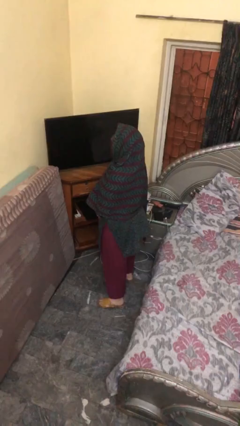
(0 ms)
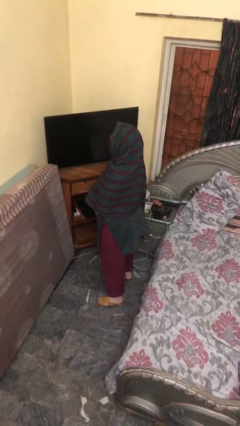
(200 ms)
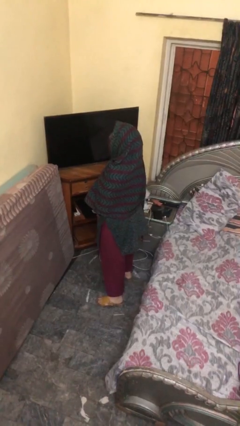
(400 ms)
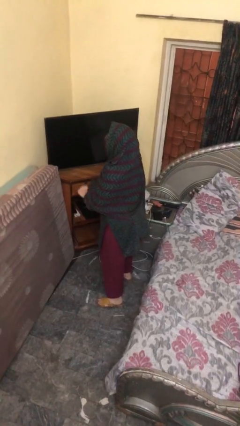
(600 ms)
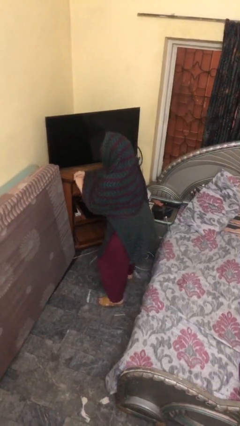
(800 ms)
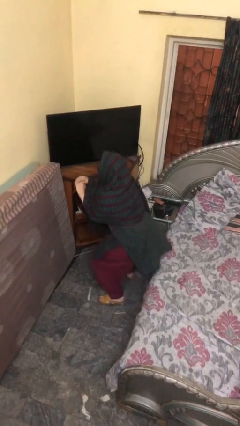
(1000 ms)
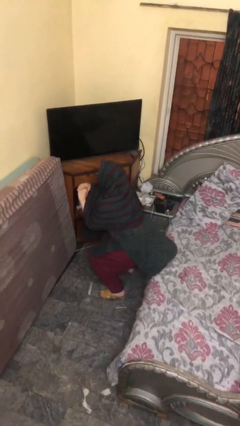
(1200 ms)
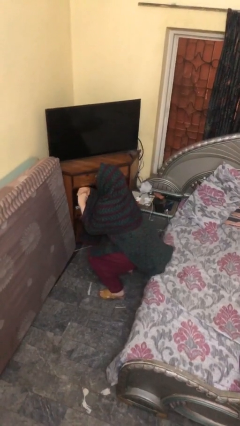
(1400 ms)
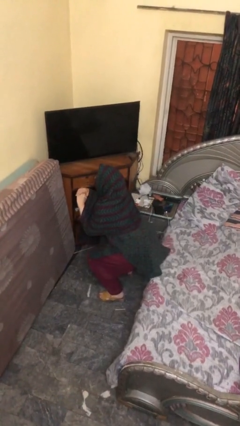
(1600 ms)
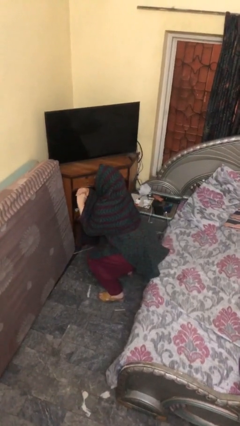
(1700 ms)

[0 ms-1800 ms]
person squats

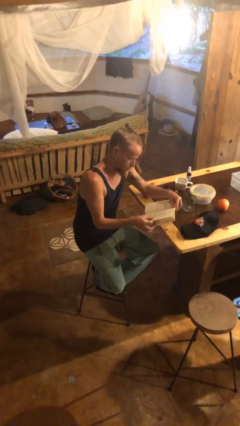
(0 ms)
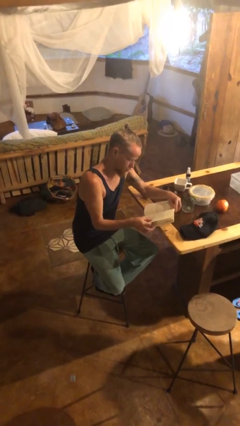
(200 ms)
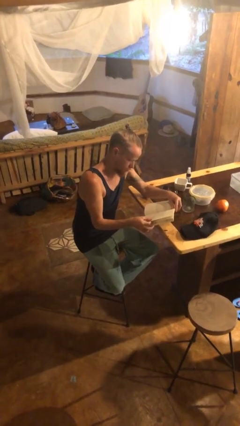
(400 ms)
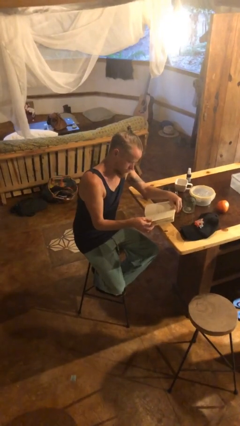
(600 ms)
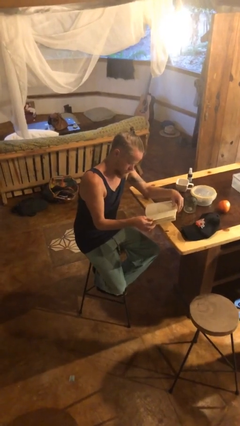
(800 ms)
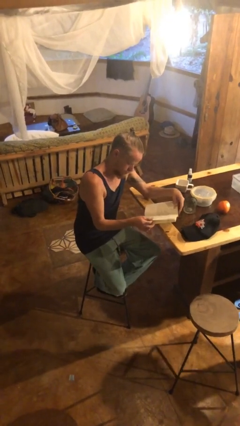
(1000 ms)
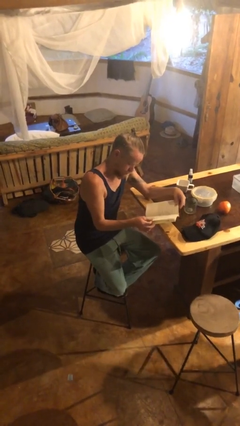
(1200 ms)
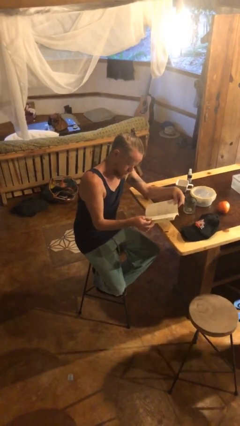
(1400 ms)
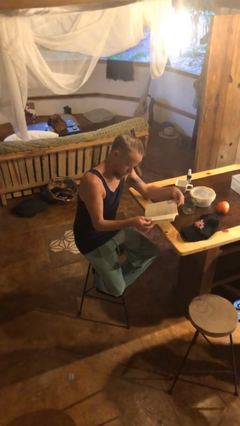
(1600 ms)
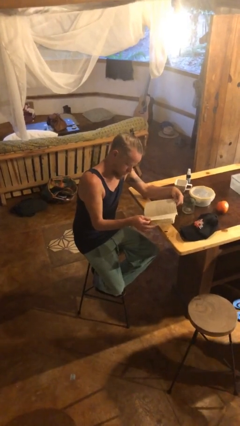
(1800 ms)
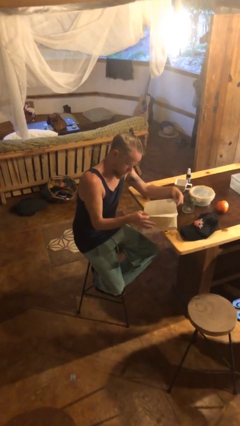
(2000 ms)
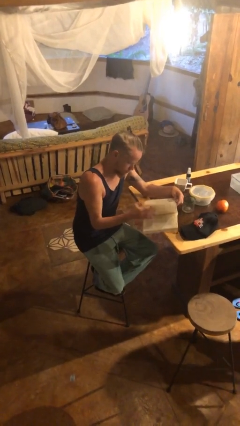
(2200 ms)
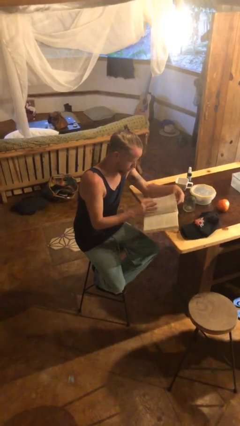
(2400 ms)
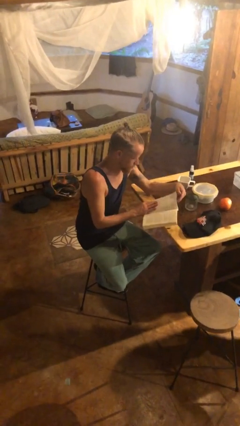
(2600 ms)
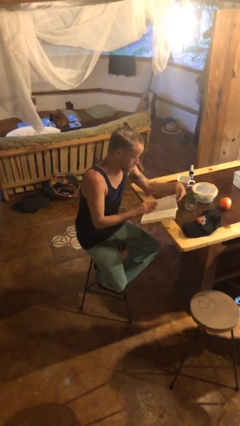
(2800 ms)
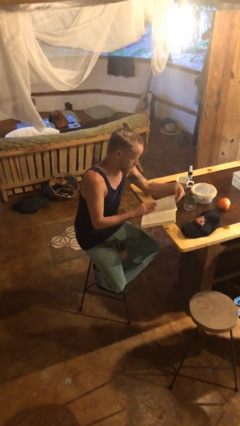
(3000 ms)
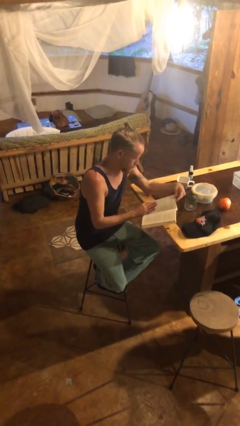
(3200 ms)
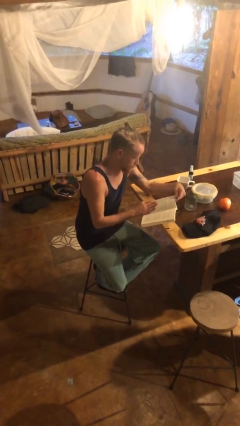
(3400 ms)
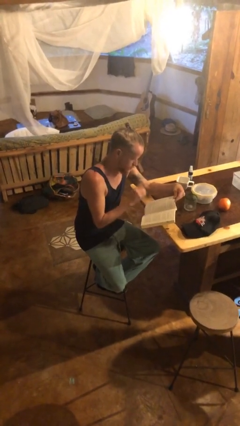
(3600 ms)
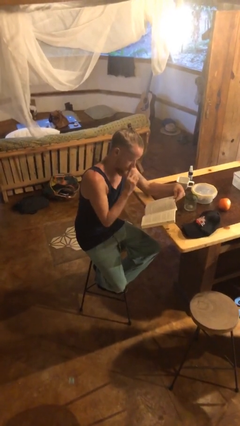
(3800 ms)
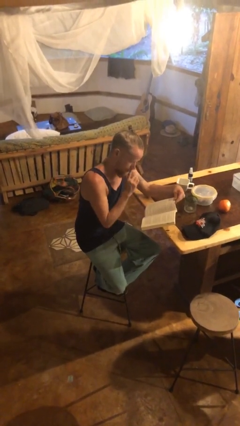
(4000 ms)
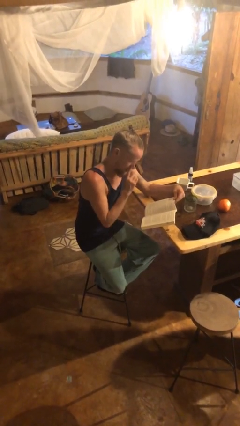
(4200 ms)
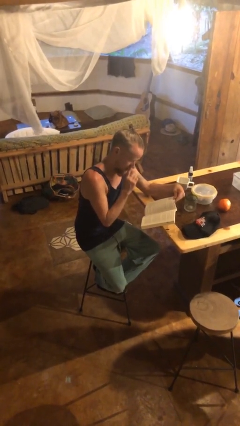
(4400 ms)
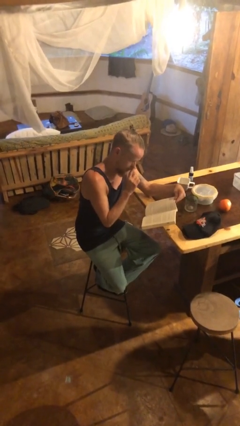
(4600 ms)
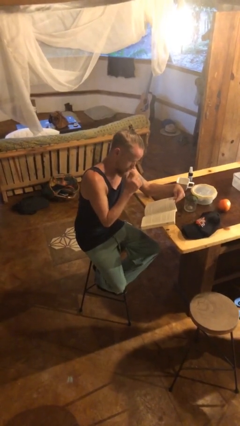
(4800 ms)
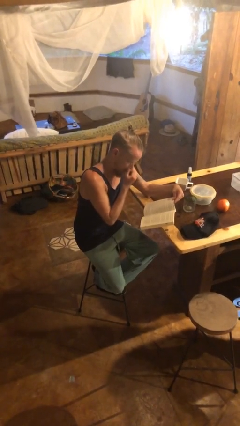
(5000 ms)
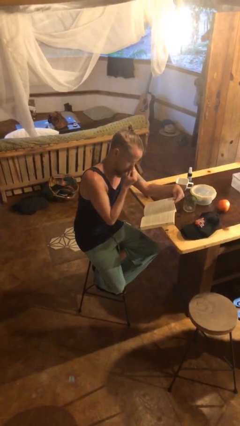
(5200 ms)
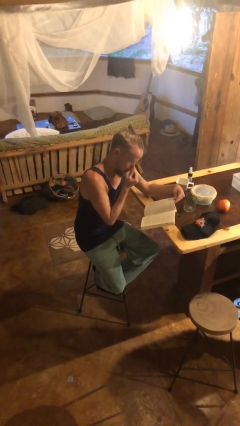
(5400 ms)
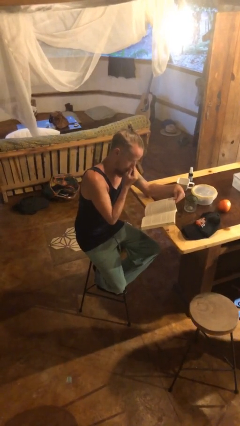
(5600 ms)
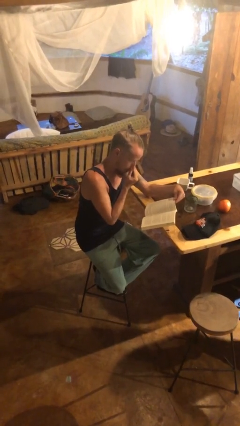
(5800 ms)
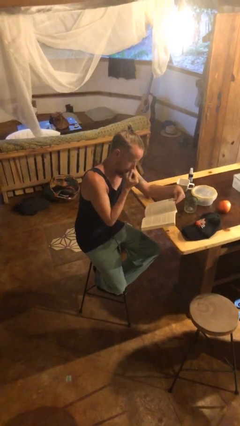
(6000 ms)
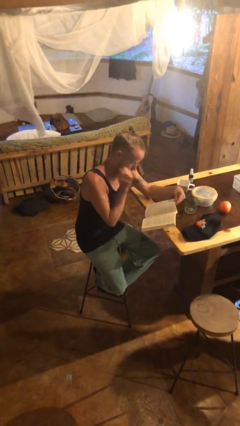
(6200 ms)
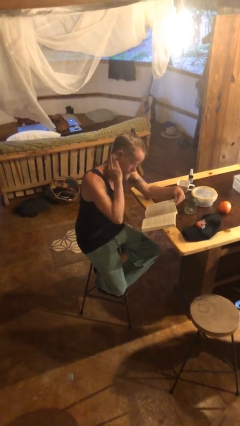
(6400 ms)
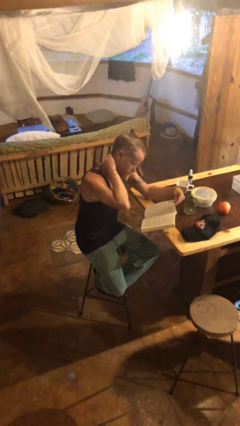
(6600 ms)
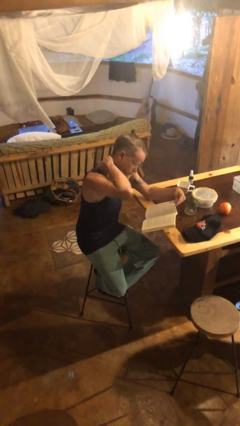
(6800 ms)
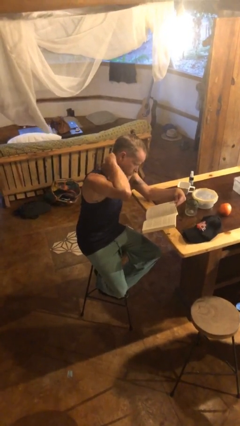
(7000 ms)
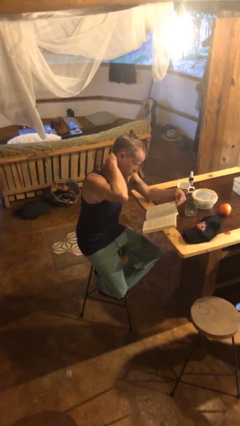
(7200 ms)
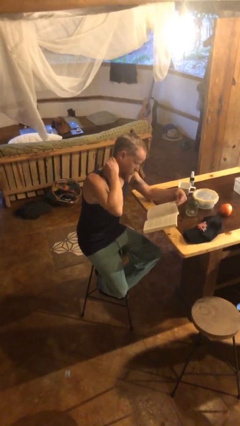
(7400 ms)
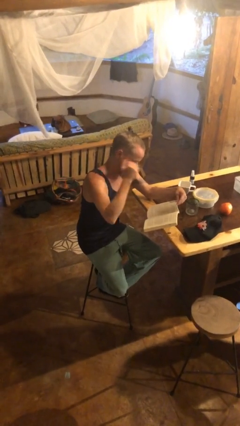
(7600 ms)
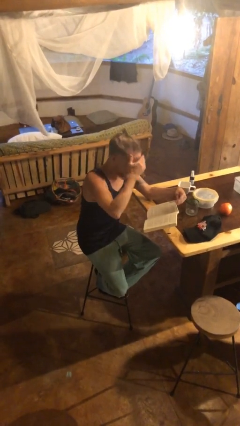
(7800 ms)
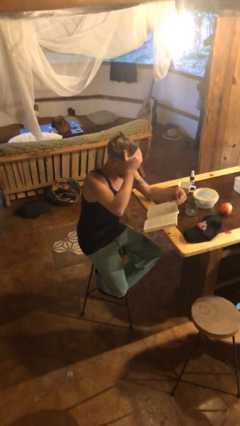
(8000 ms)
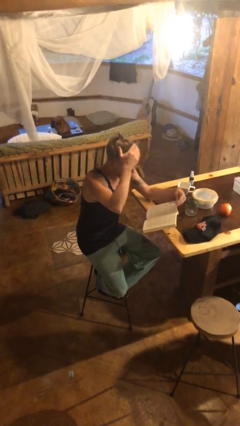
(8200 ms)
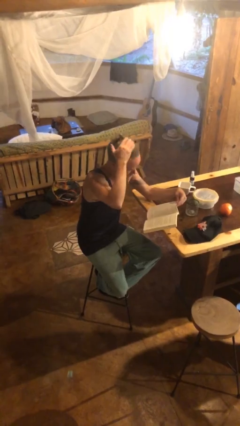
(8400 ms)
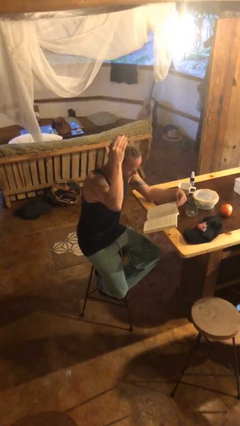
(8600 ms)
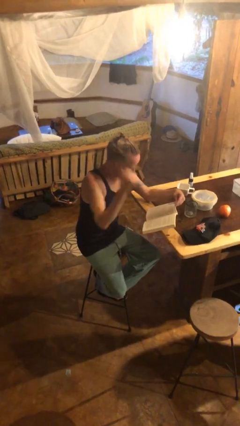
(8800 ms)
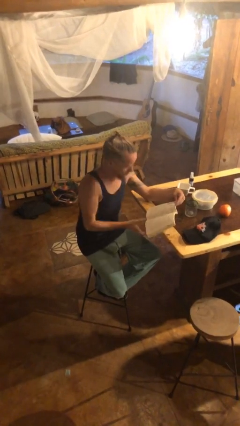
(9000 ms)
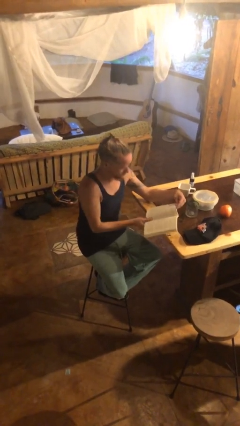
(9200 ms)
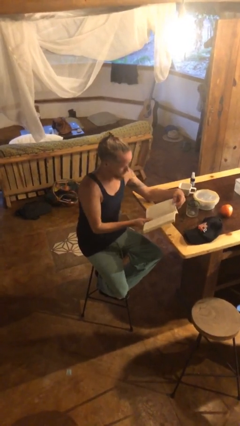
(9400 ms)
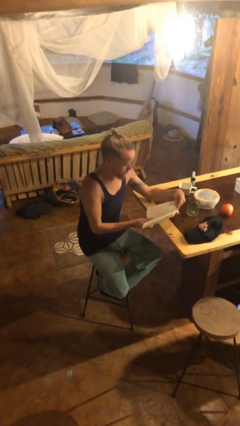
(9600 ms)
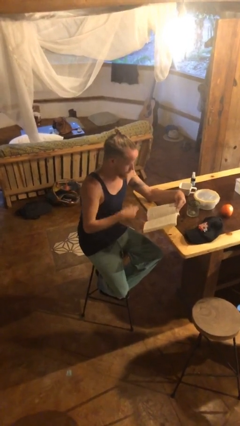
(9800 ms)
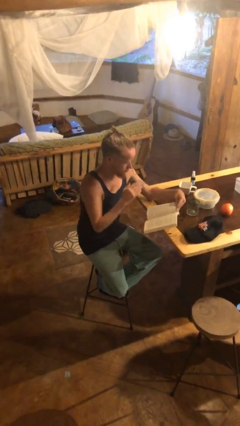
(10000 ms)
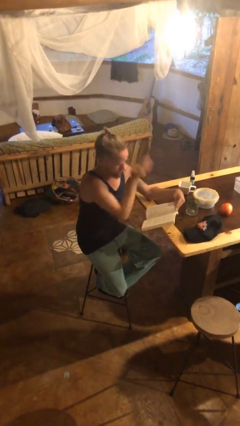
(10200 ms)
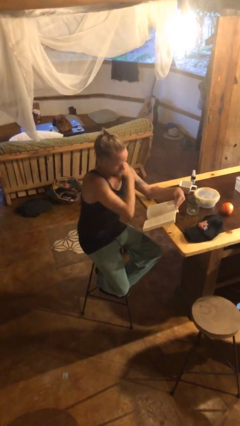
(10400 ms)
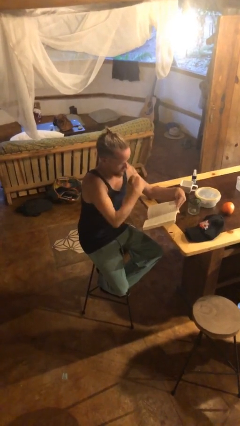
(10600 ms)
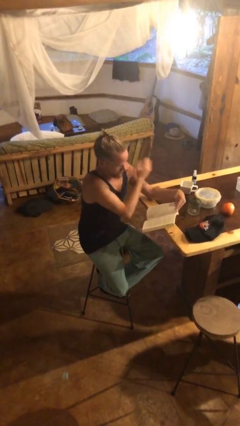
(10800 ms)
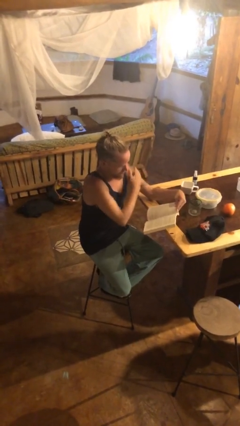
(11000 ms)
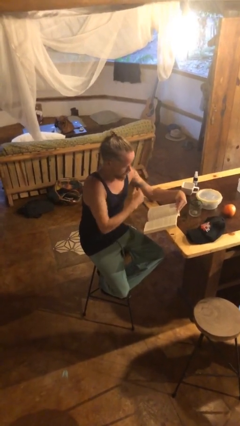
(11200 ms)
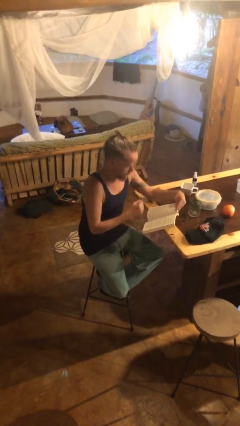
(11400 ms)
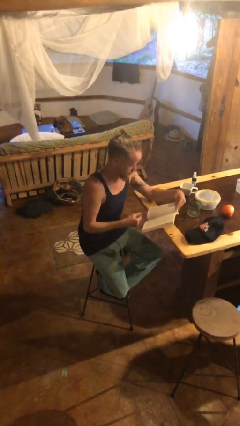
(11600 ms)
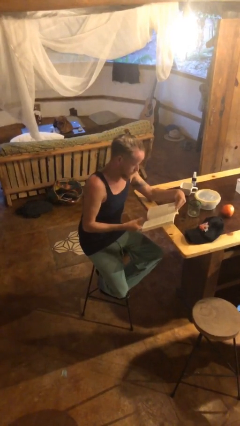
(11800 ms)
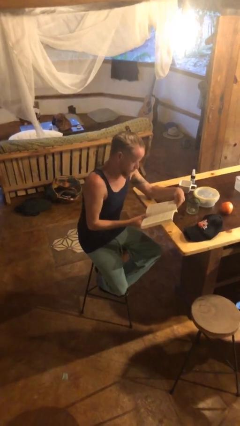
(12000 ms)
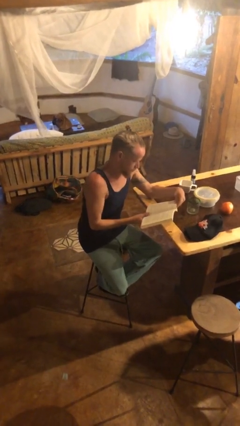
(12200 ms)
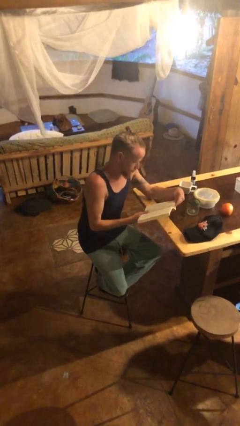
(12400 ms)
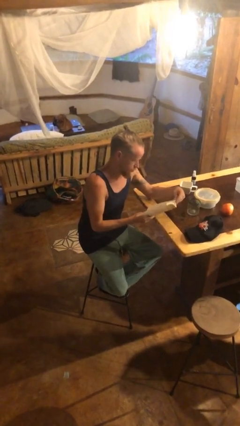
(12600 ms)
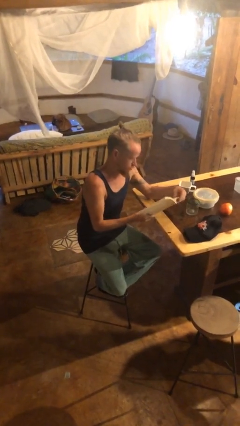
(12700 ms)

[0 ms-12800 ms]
person reads document

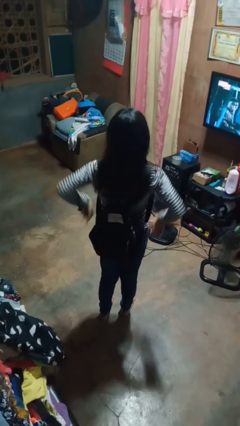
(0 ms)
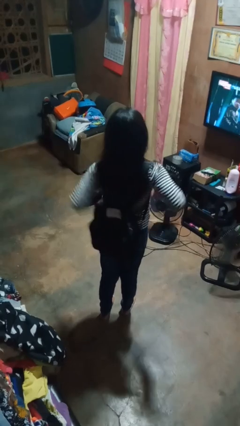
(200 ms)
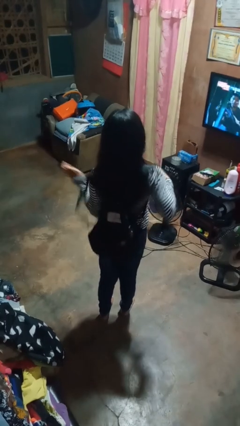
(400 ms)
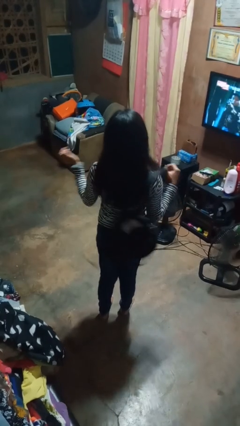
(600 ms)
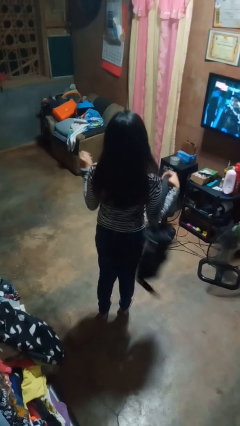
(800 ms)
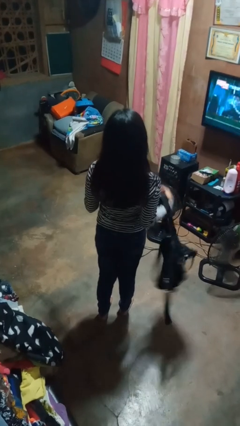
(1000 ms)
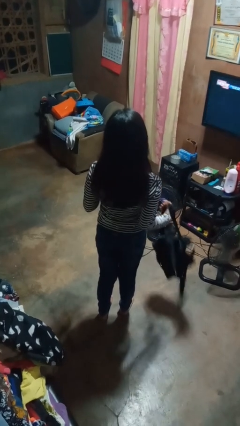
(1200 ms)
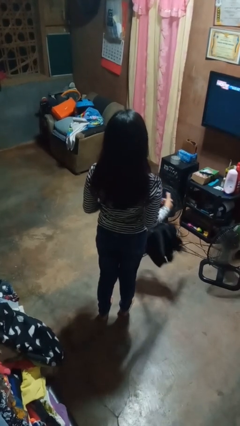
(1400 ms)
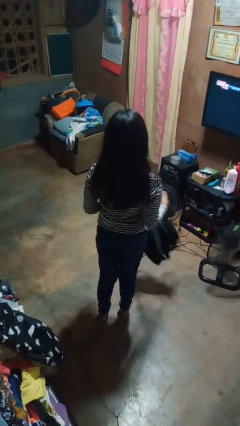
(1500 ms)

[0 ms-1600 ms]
person takes off backpack

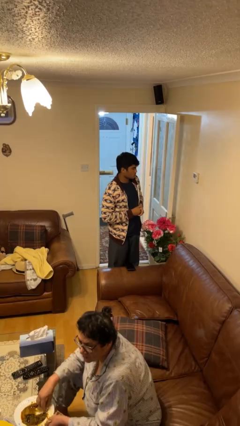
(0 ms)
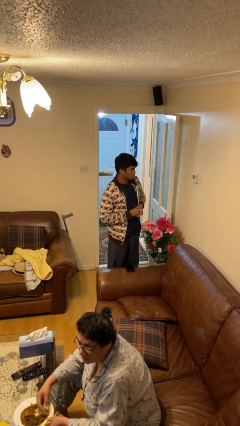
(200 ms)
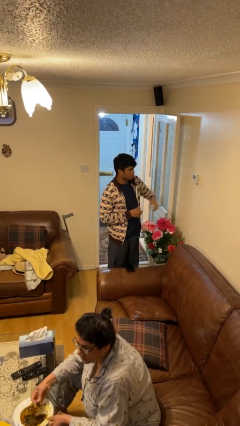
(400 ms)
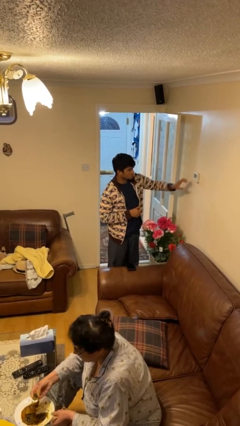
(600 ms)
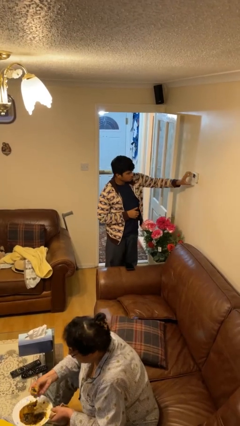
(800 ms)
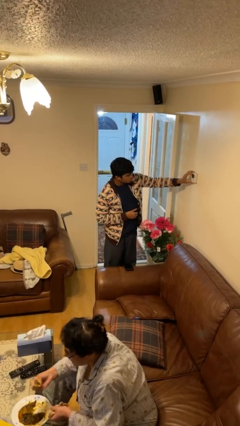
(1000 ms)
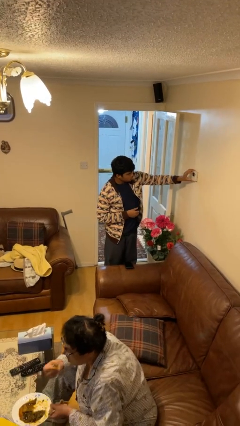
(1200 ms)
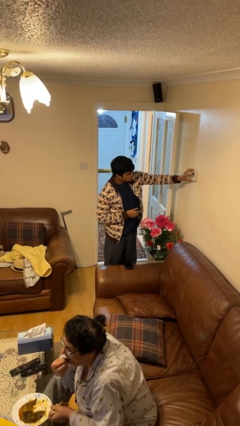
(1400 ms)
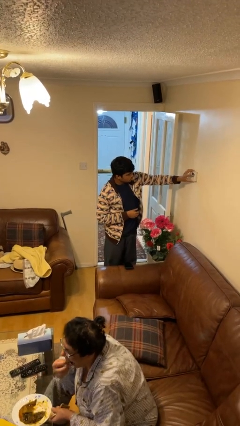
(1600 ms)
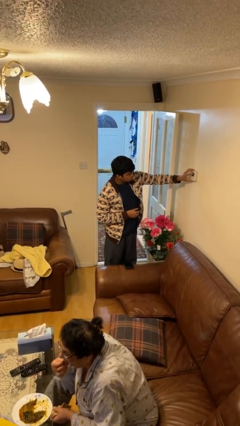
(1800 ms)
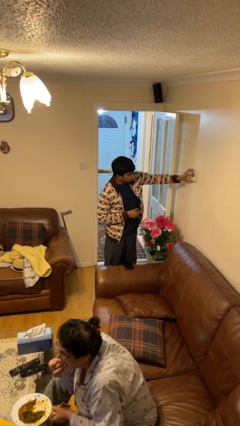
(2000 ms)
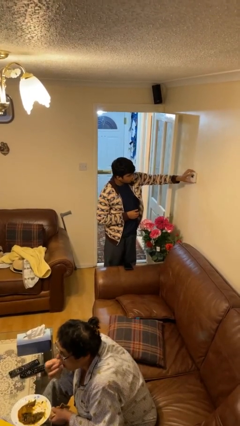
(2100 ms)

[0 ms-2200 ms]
person adjusts thermostat
